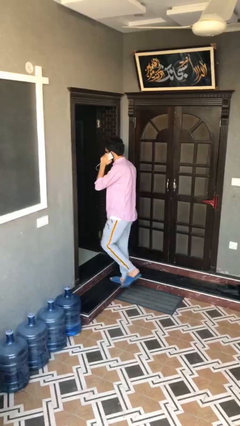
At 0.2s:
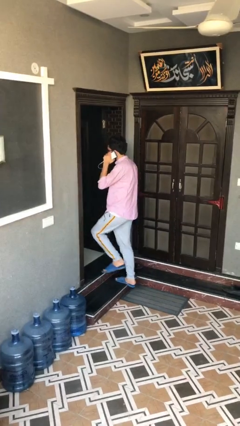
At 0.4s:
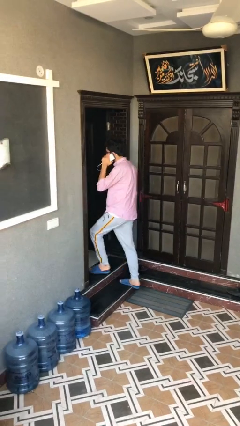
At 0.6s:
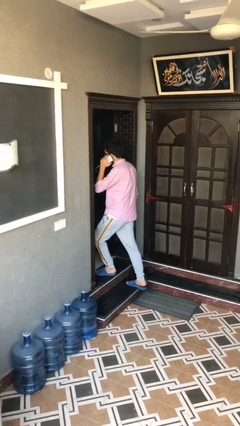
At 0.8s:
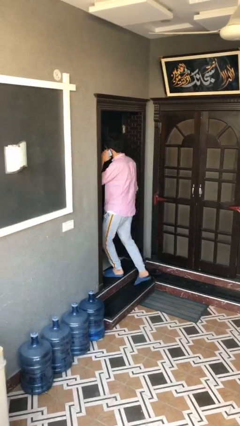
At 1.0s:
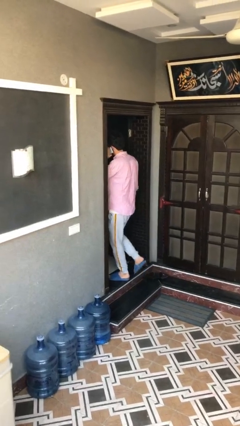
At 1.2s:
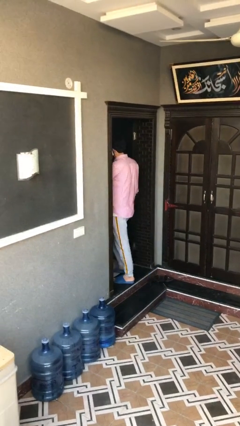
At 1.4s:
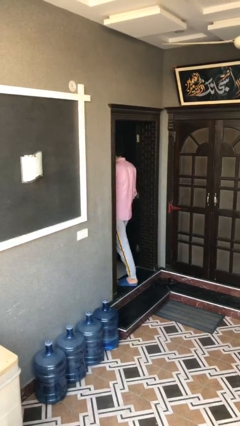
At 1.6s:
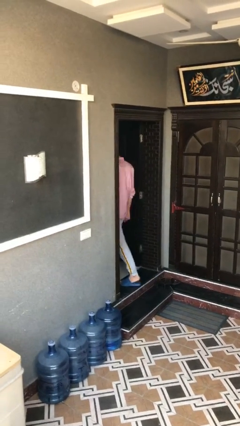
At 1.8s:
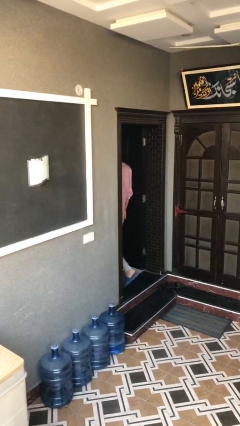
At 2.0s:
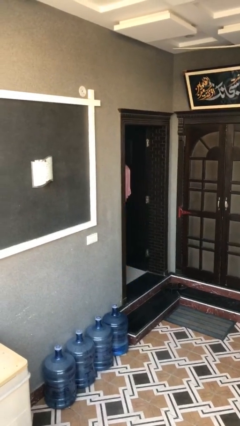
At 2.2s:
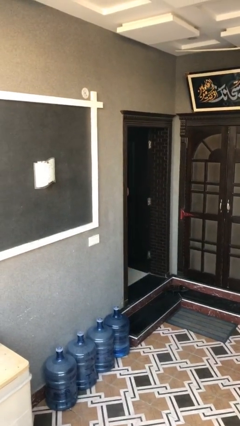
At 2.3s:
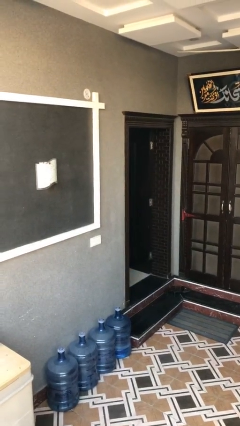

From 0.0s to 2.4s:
person exits scene through structure

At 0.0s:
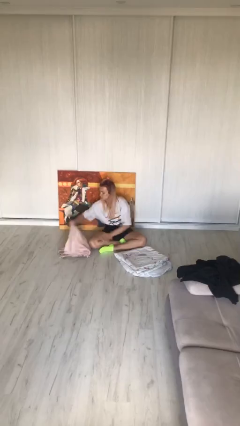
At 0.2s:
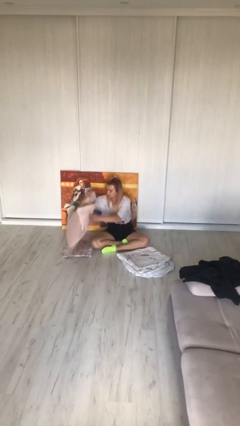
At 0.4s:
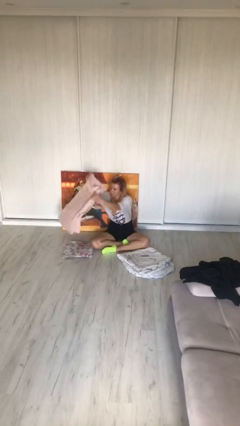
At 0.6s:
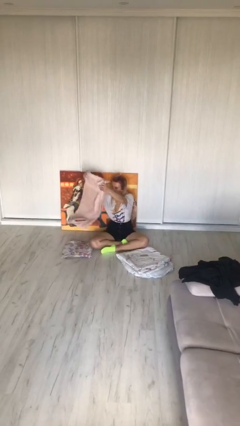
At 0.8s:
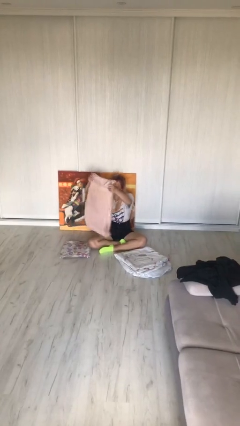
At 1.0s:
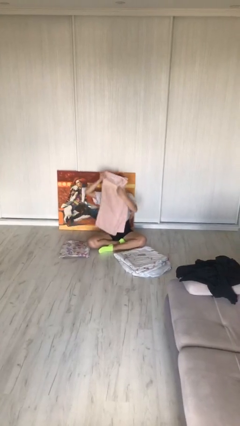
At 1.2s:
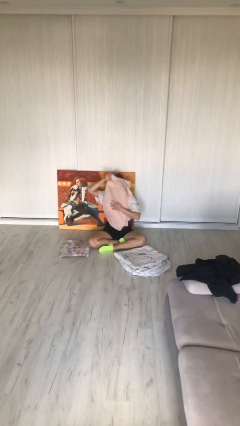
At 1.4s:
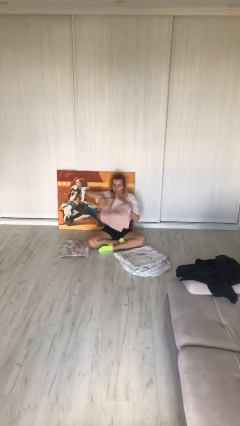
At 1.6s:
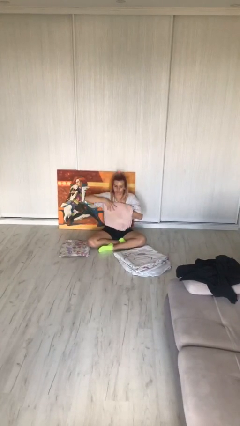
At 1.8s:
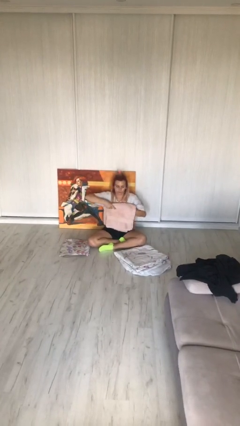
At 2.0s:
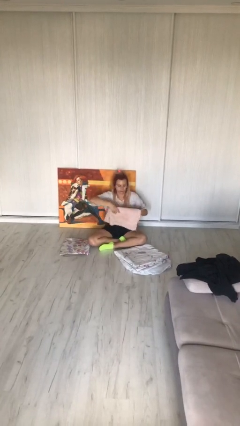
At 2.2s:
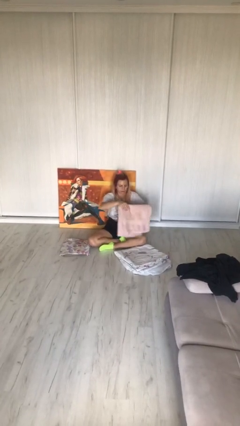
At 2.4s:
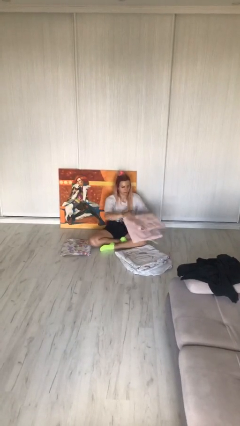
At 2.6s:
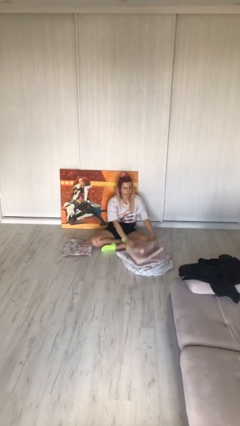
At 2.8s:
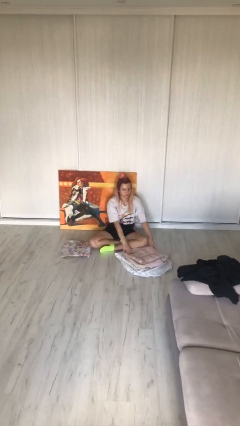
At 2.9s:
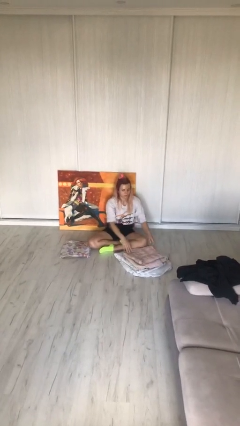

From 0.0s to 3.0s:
person folds towel

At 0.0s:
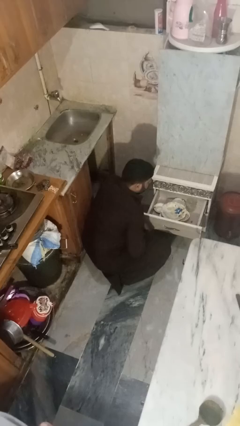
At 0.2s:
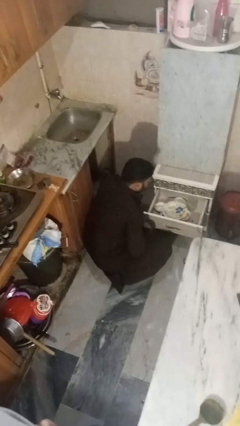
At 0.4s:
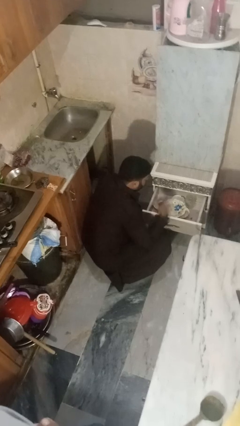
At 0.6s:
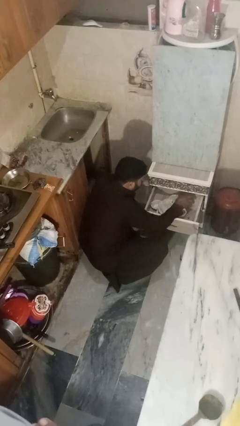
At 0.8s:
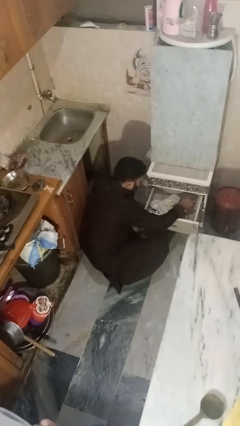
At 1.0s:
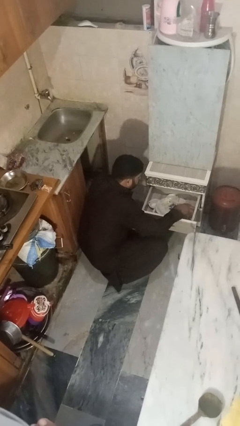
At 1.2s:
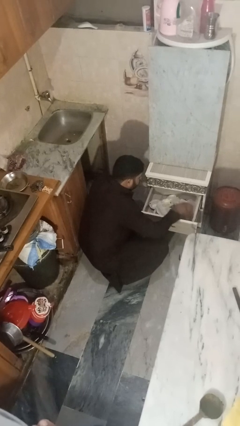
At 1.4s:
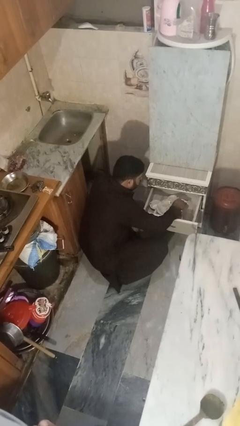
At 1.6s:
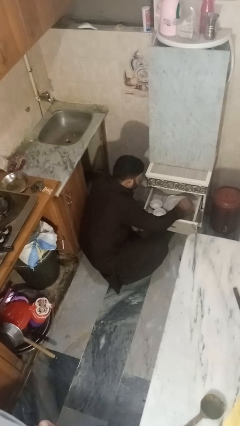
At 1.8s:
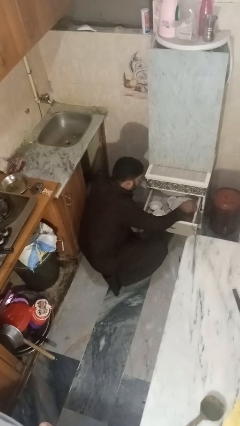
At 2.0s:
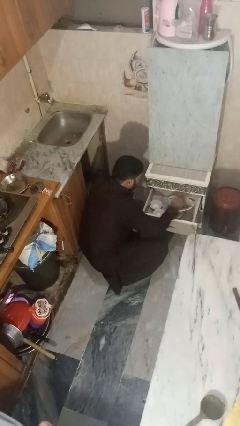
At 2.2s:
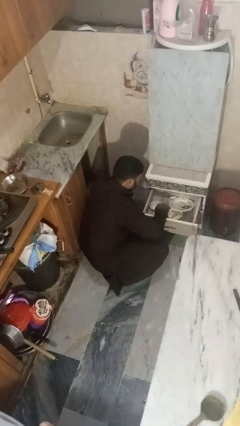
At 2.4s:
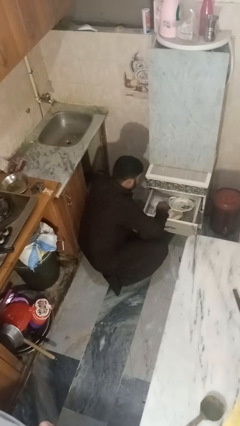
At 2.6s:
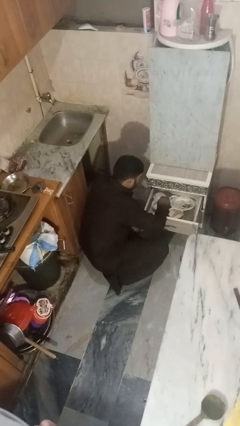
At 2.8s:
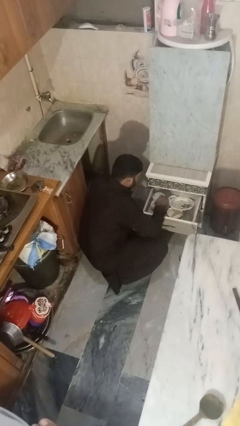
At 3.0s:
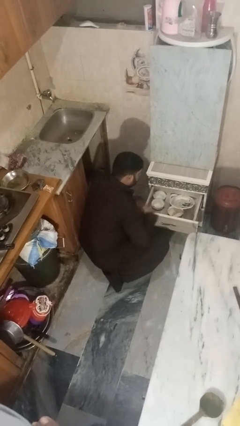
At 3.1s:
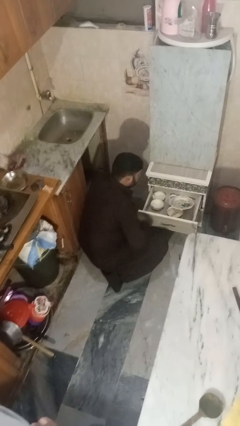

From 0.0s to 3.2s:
person searches in kitchen drawer

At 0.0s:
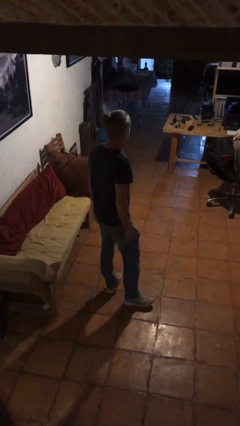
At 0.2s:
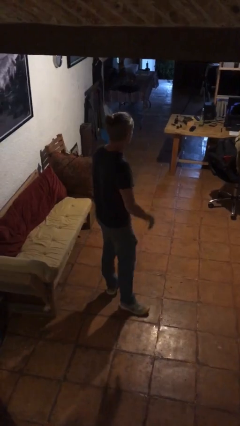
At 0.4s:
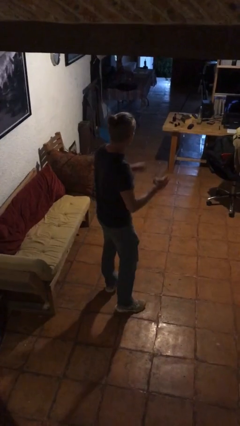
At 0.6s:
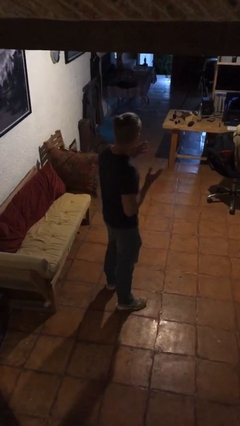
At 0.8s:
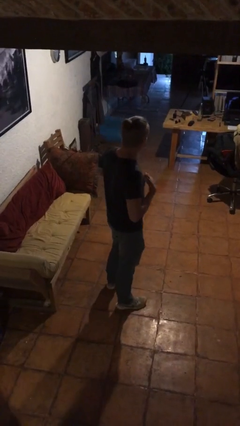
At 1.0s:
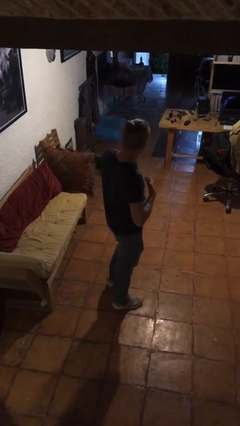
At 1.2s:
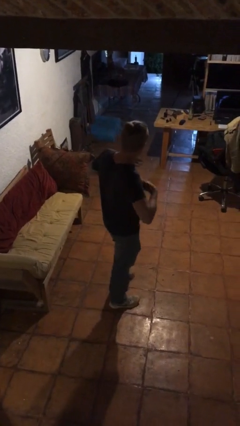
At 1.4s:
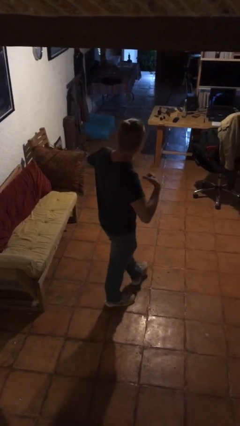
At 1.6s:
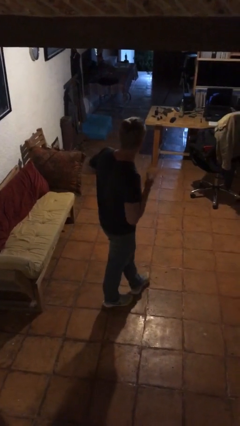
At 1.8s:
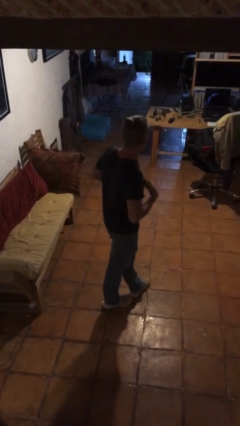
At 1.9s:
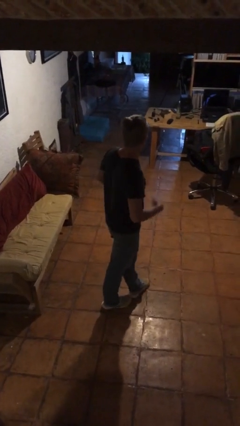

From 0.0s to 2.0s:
person drums on chest

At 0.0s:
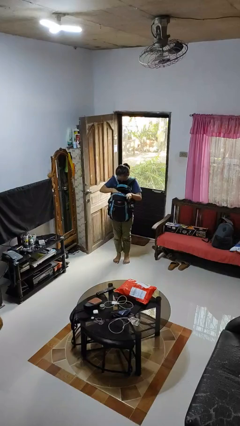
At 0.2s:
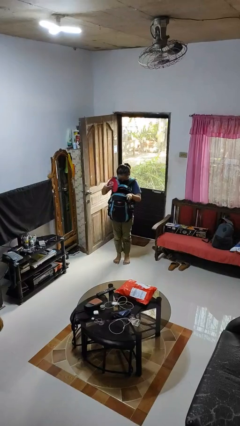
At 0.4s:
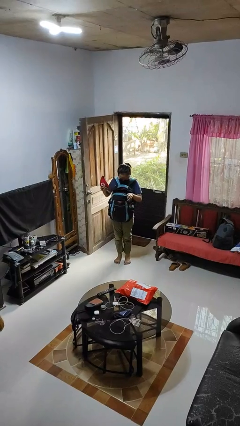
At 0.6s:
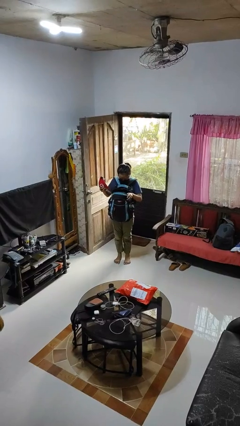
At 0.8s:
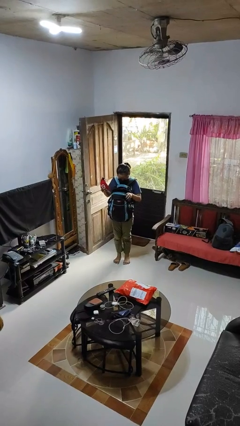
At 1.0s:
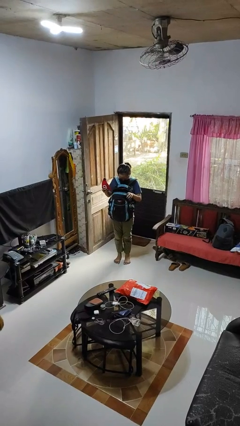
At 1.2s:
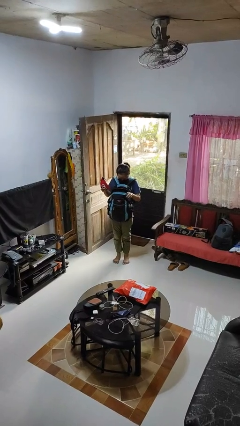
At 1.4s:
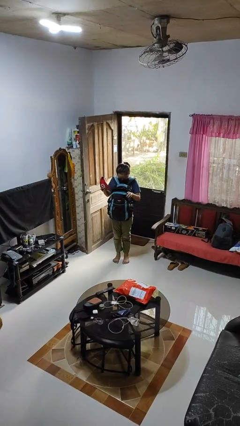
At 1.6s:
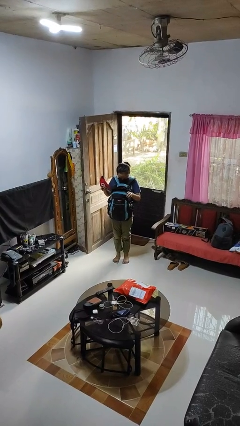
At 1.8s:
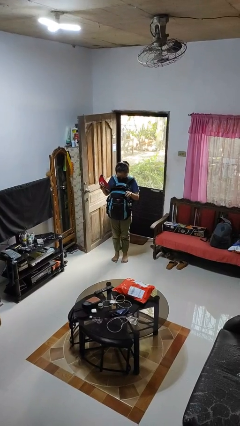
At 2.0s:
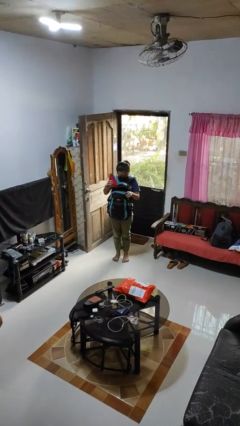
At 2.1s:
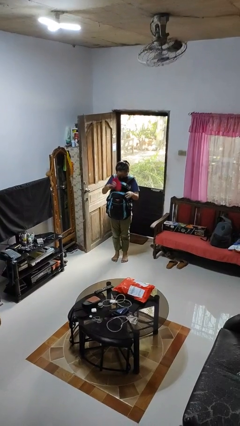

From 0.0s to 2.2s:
person takes object from backpack

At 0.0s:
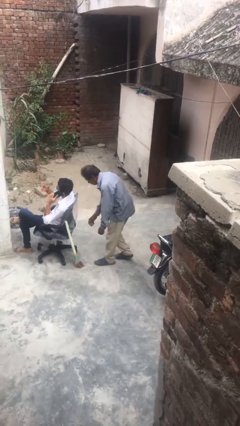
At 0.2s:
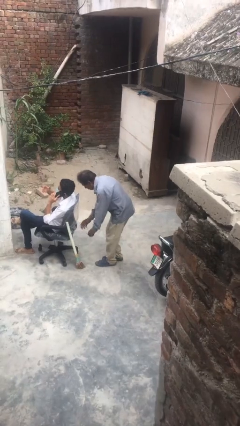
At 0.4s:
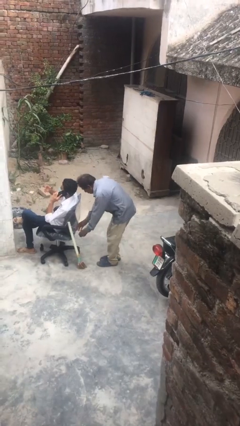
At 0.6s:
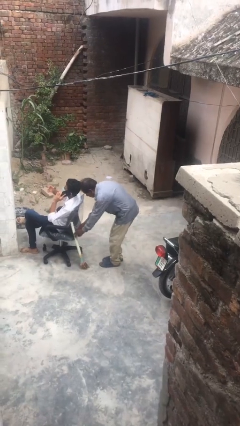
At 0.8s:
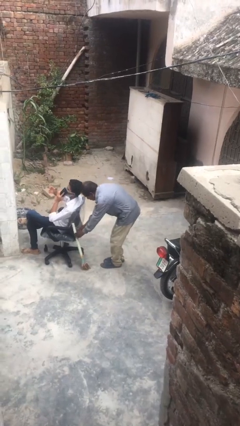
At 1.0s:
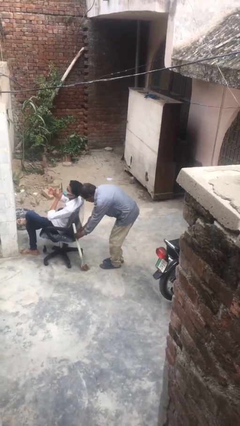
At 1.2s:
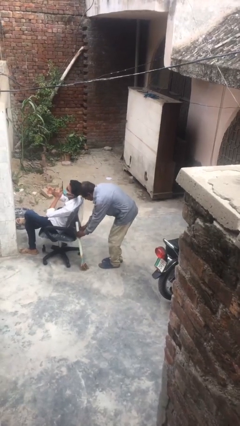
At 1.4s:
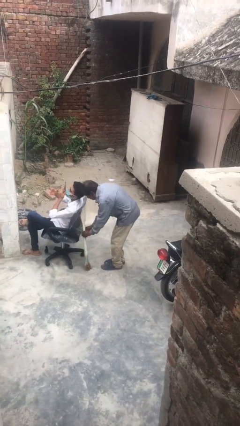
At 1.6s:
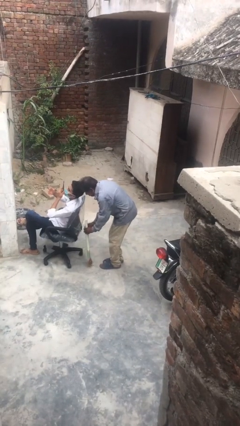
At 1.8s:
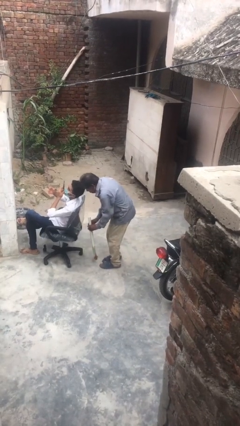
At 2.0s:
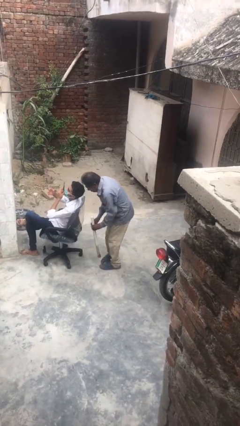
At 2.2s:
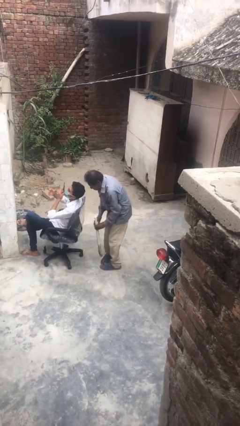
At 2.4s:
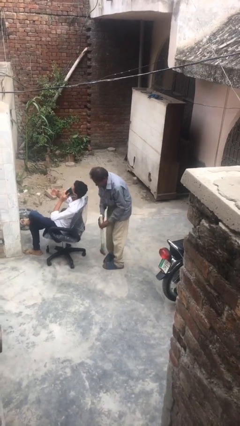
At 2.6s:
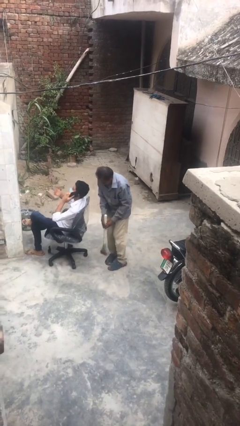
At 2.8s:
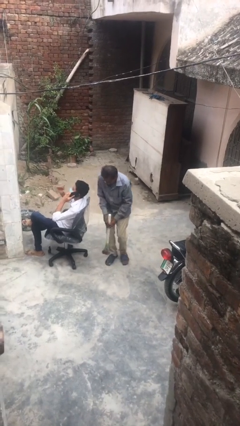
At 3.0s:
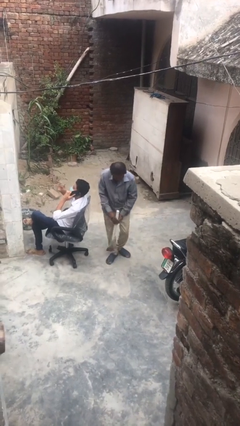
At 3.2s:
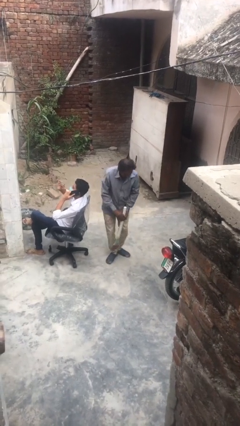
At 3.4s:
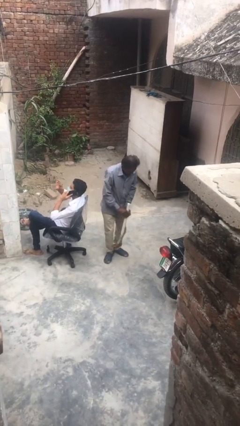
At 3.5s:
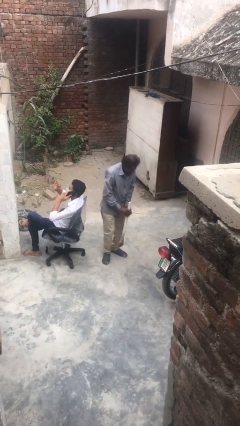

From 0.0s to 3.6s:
person steals object from person

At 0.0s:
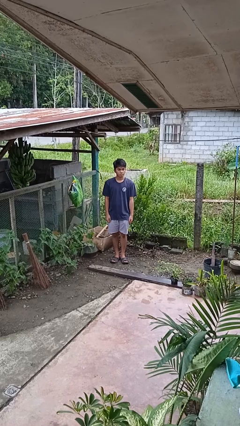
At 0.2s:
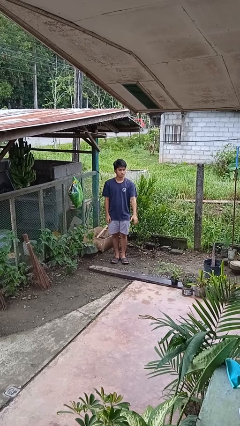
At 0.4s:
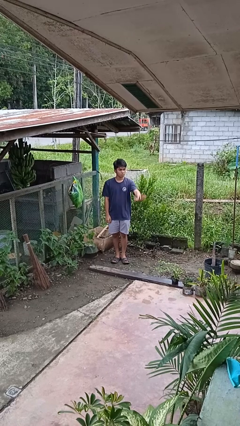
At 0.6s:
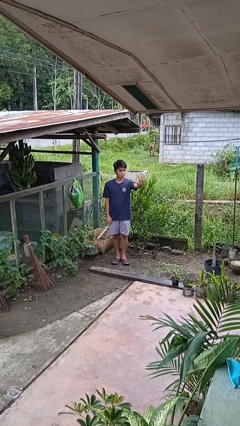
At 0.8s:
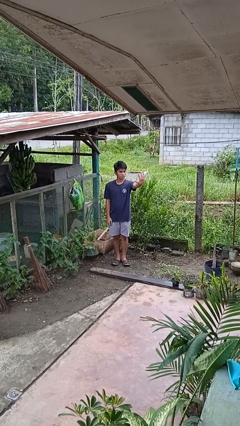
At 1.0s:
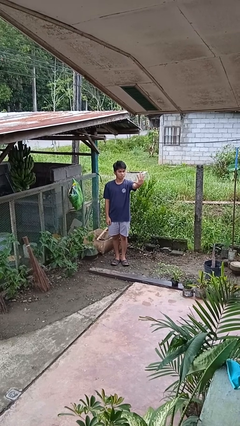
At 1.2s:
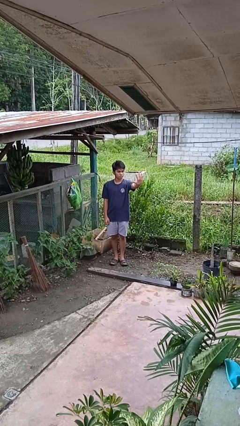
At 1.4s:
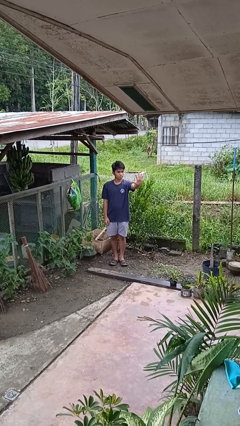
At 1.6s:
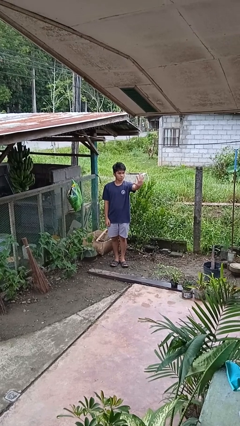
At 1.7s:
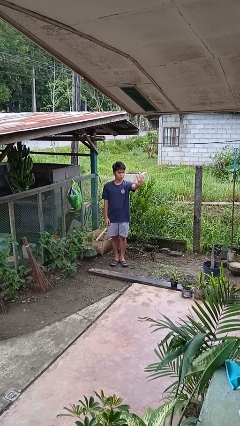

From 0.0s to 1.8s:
person gestures number five
